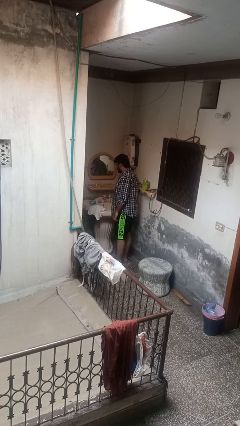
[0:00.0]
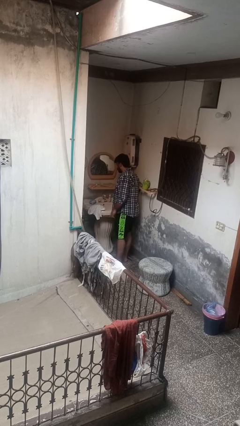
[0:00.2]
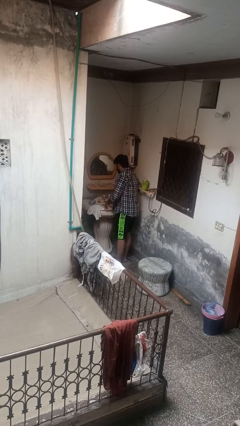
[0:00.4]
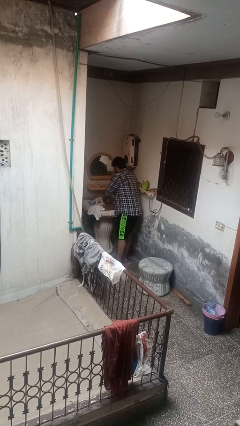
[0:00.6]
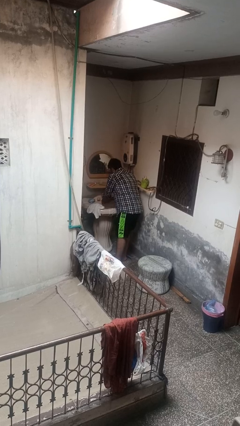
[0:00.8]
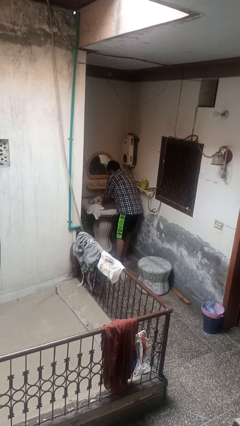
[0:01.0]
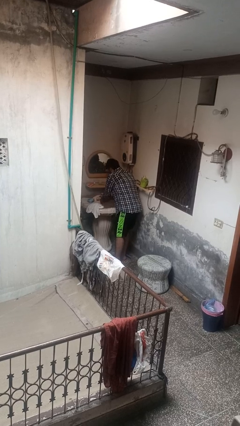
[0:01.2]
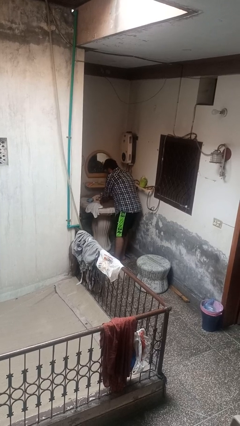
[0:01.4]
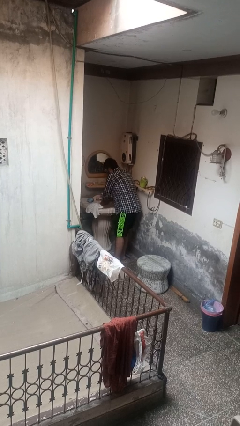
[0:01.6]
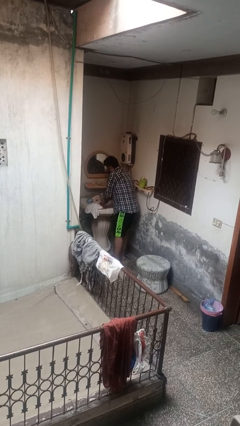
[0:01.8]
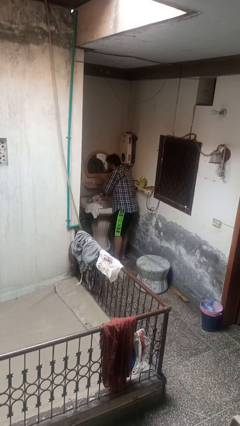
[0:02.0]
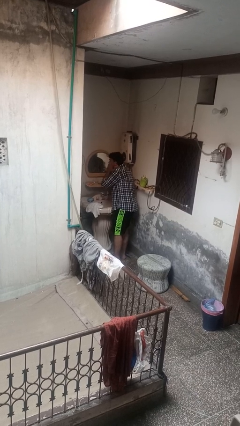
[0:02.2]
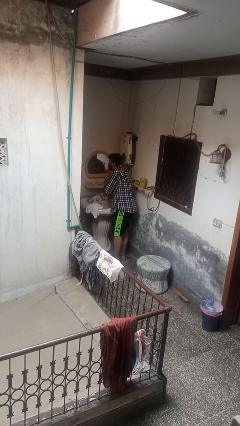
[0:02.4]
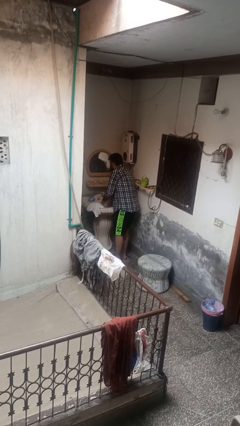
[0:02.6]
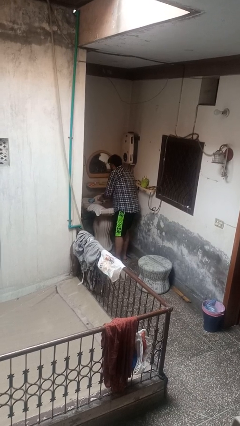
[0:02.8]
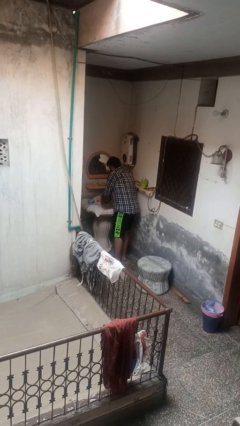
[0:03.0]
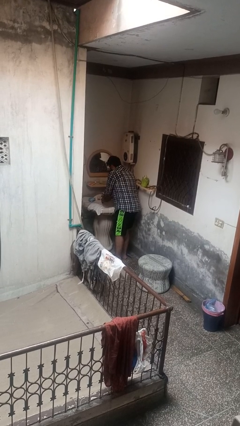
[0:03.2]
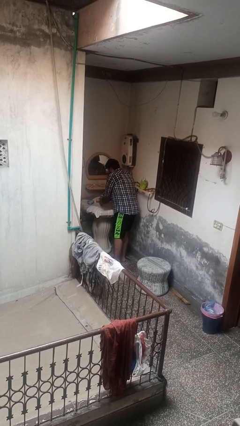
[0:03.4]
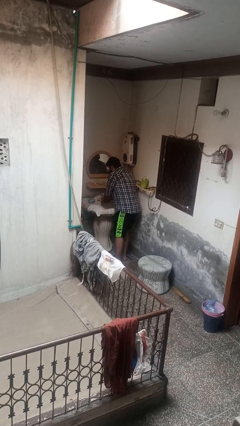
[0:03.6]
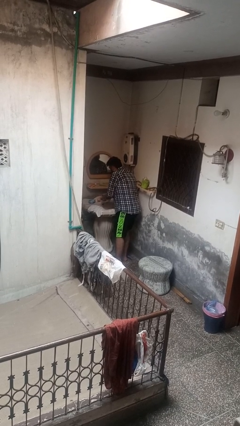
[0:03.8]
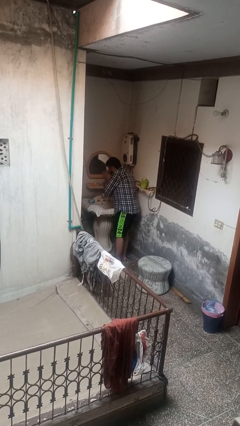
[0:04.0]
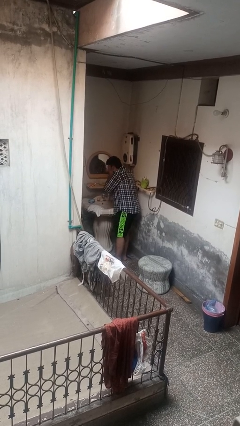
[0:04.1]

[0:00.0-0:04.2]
person washes face

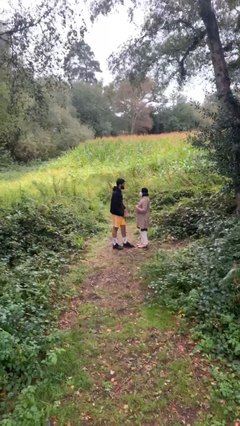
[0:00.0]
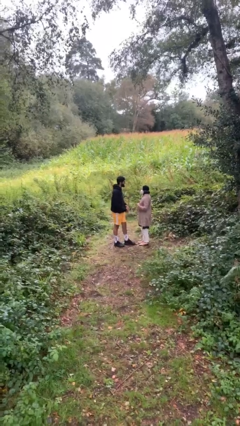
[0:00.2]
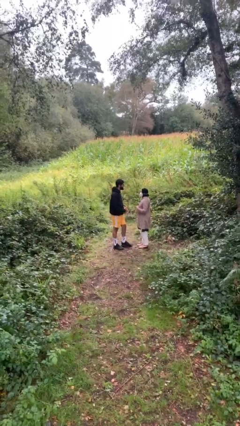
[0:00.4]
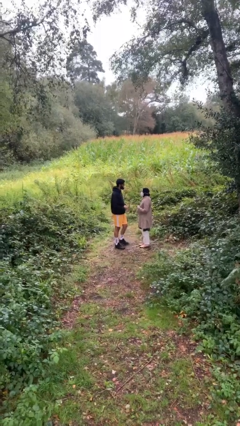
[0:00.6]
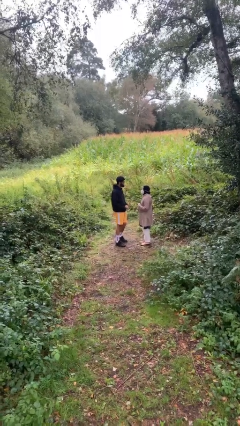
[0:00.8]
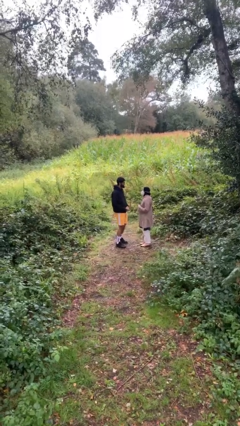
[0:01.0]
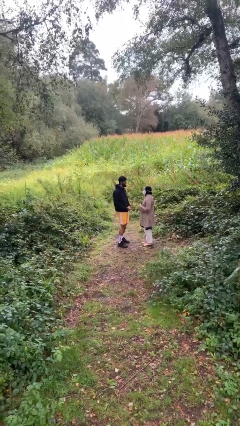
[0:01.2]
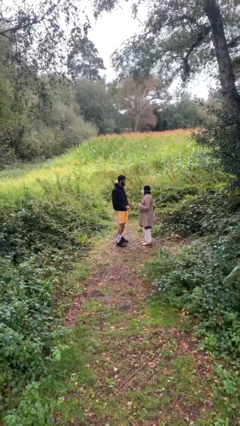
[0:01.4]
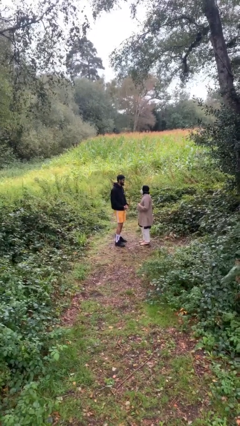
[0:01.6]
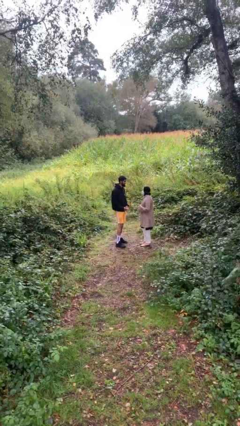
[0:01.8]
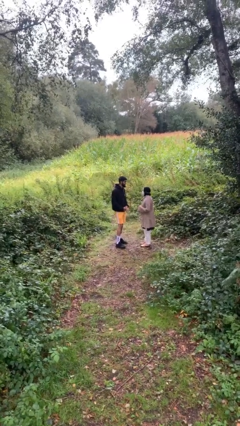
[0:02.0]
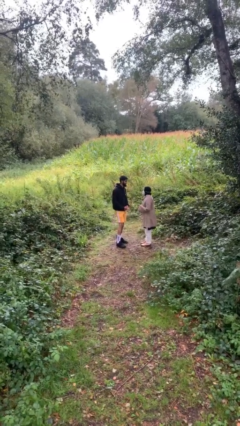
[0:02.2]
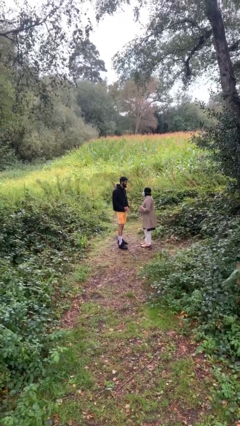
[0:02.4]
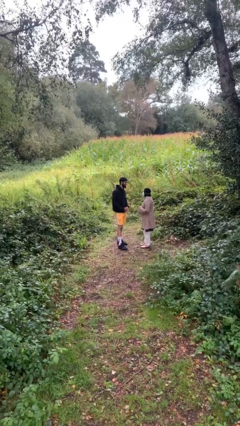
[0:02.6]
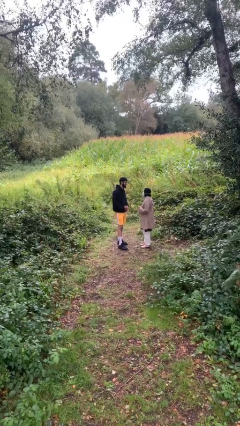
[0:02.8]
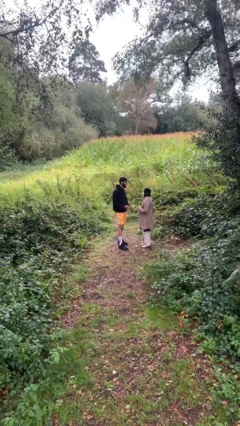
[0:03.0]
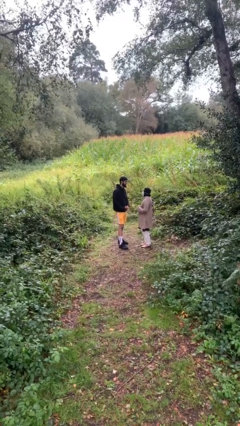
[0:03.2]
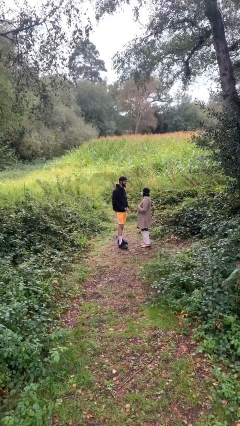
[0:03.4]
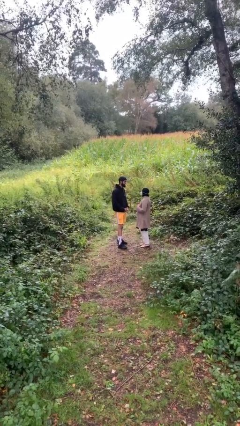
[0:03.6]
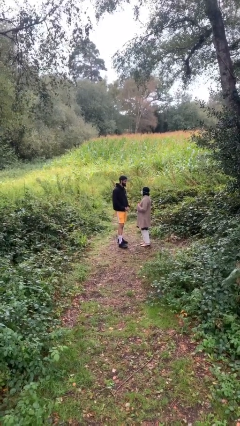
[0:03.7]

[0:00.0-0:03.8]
person talks to person

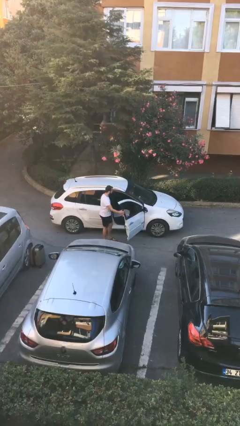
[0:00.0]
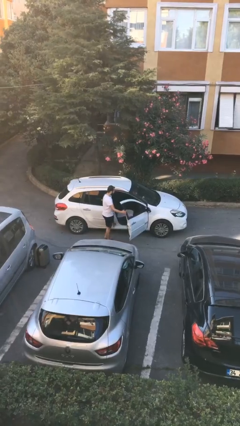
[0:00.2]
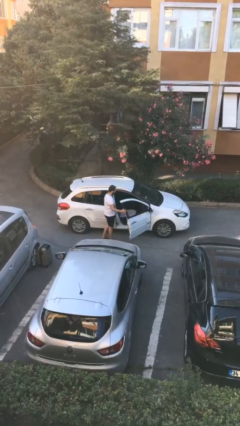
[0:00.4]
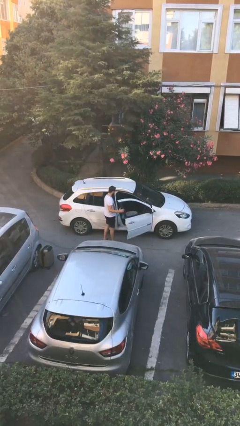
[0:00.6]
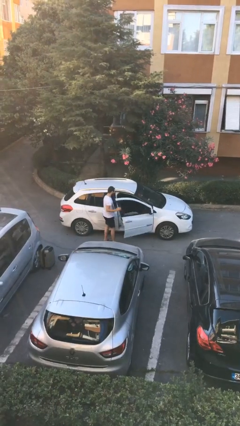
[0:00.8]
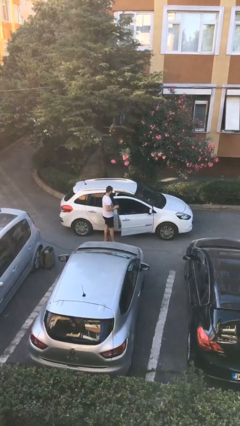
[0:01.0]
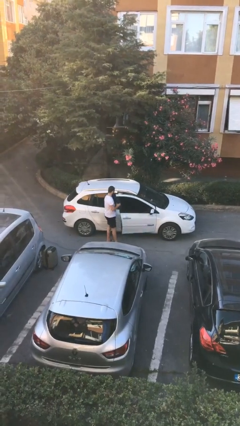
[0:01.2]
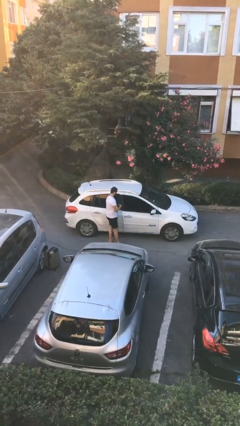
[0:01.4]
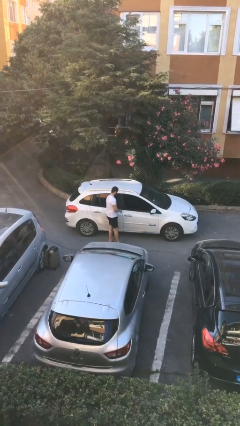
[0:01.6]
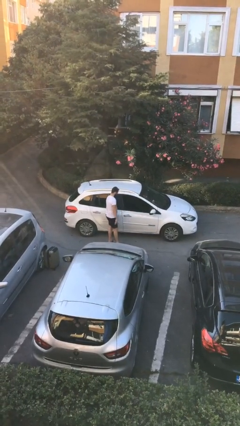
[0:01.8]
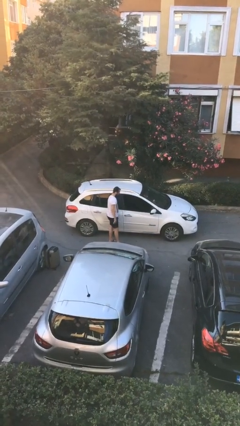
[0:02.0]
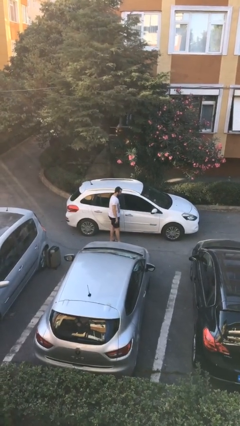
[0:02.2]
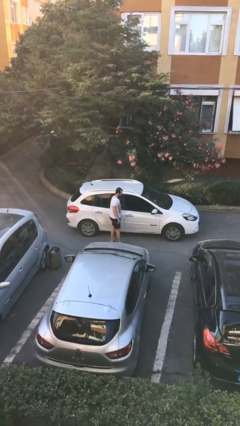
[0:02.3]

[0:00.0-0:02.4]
person closes car door

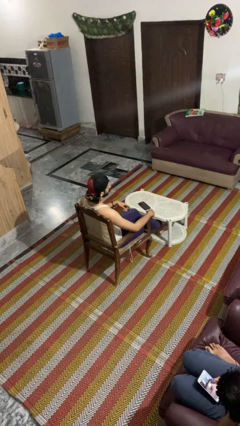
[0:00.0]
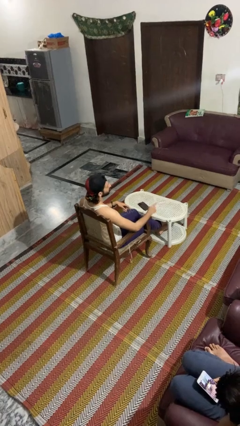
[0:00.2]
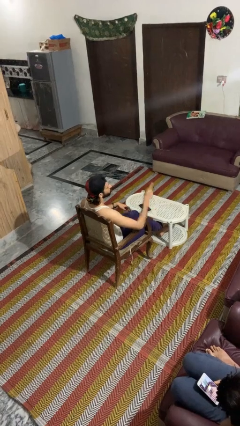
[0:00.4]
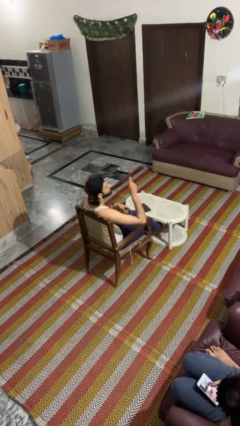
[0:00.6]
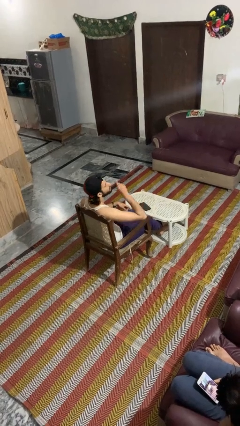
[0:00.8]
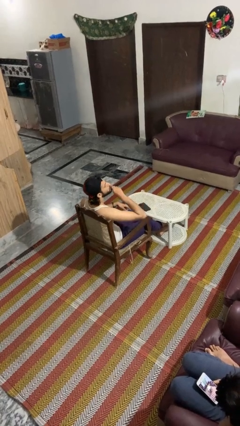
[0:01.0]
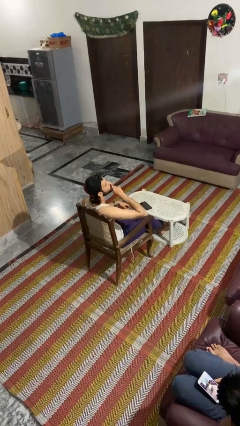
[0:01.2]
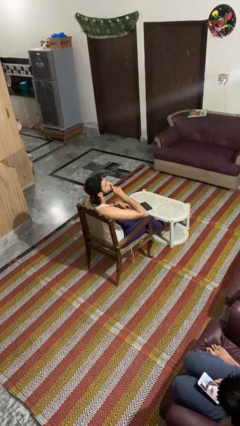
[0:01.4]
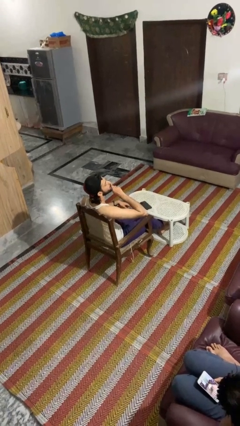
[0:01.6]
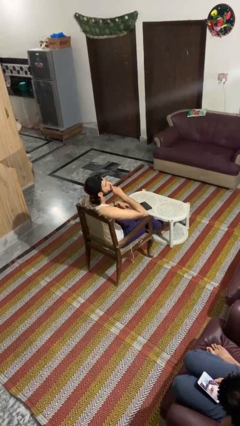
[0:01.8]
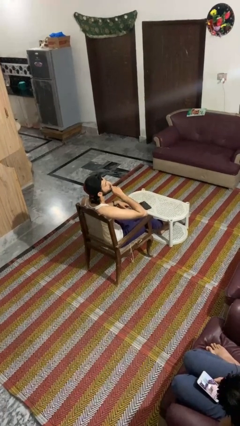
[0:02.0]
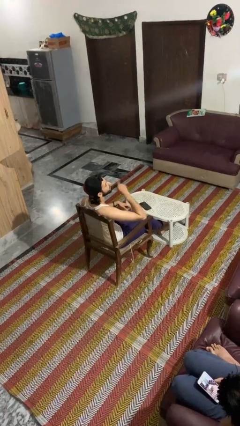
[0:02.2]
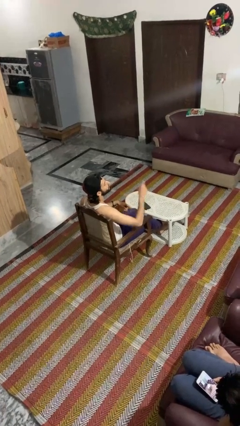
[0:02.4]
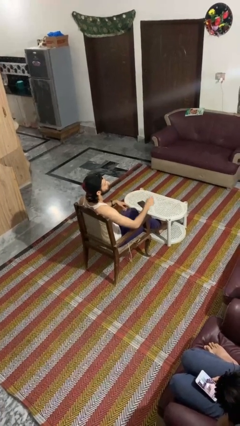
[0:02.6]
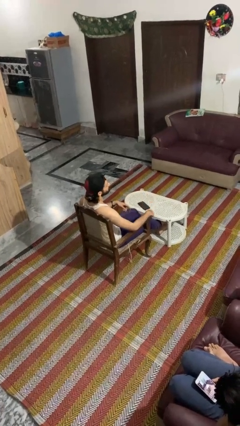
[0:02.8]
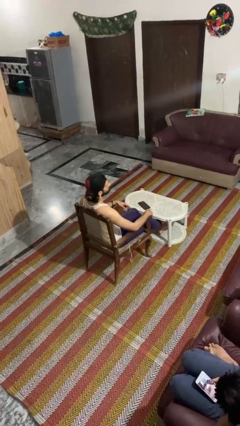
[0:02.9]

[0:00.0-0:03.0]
person gestures be quiet

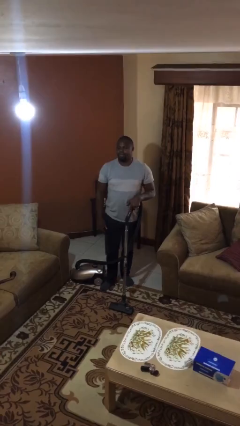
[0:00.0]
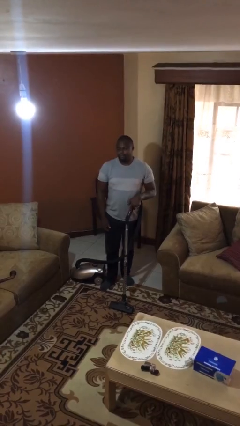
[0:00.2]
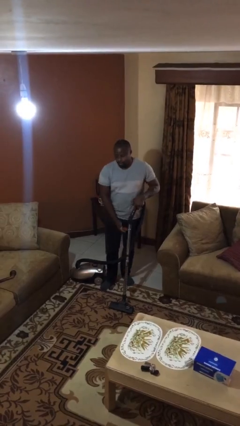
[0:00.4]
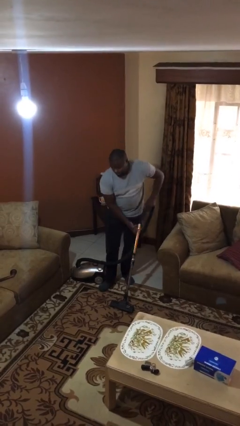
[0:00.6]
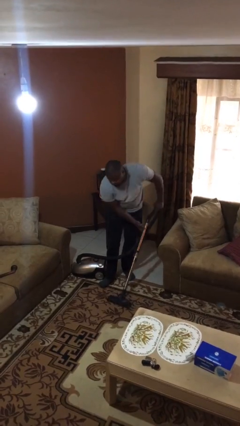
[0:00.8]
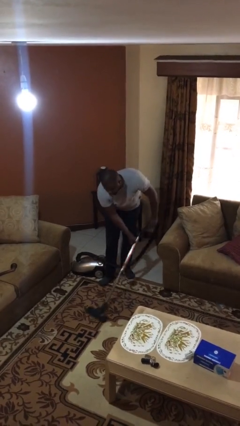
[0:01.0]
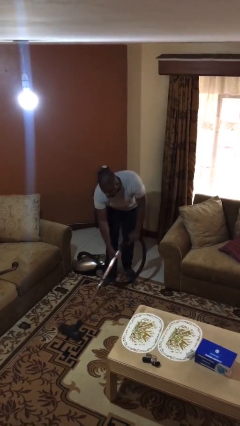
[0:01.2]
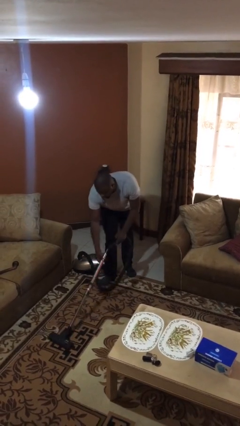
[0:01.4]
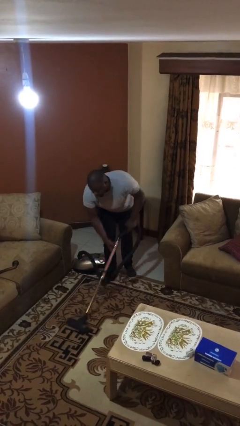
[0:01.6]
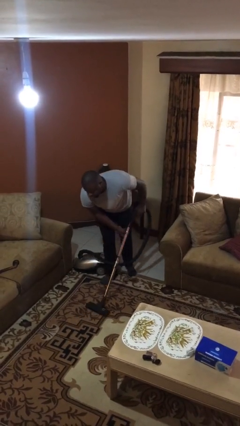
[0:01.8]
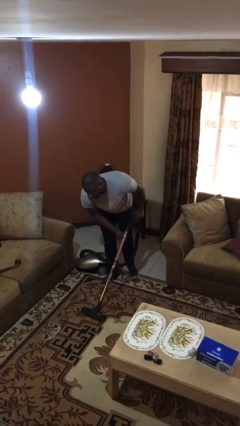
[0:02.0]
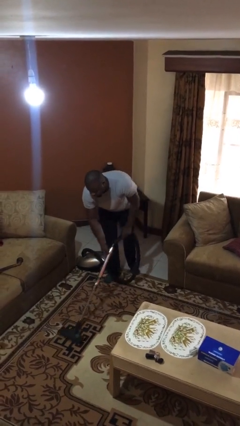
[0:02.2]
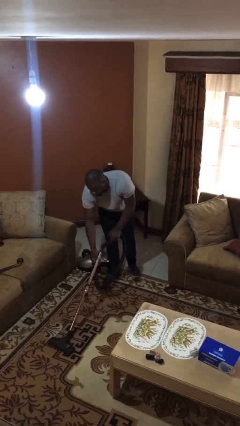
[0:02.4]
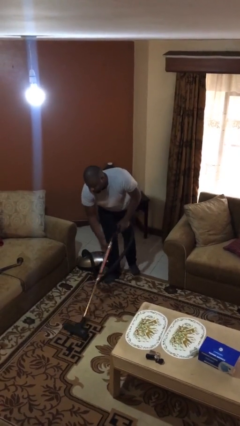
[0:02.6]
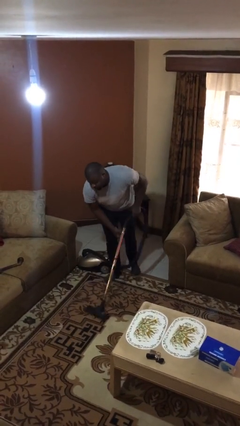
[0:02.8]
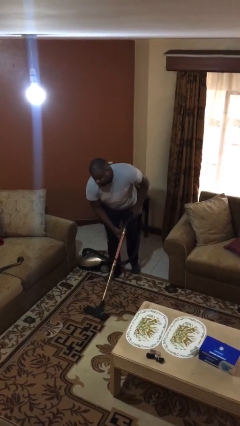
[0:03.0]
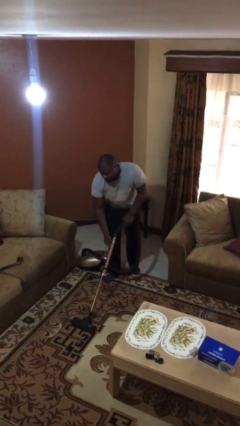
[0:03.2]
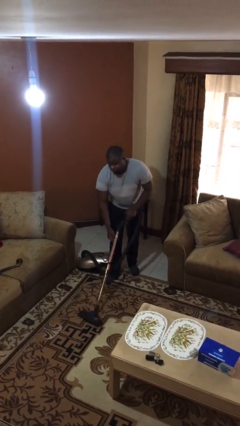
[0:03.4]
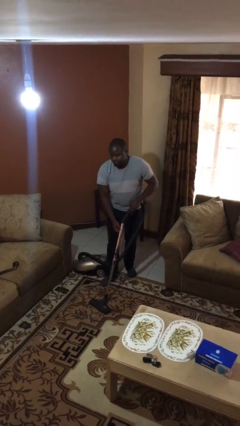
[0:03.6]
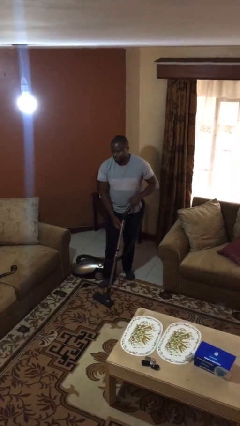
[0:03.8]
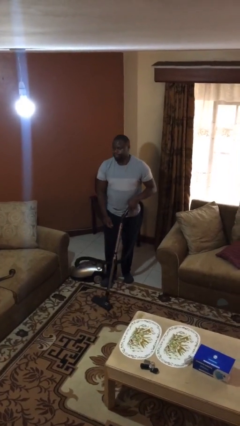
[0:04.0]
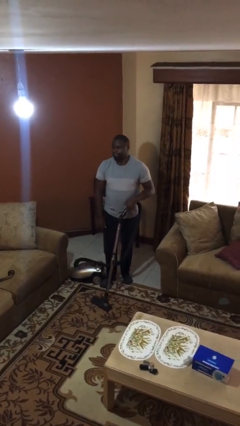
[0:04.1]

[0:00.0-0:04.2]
person vacuums carpet
